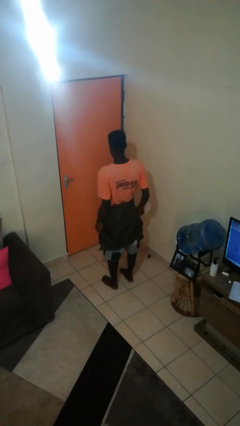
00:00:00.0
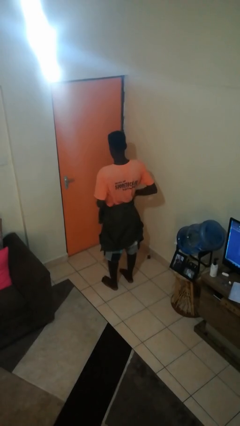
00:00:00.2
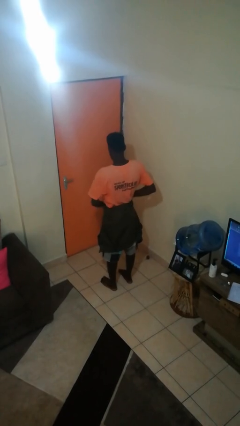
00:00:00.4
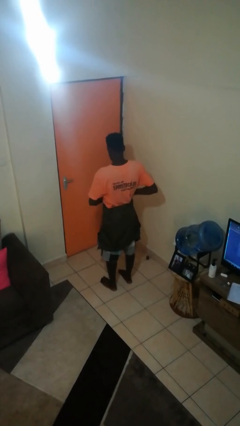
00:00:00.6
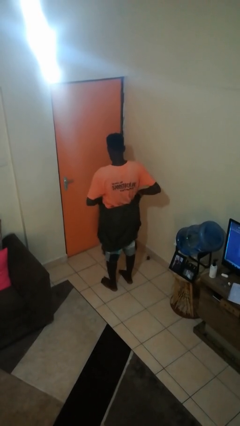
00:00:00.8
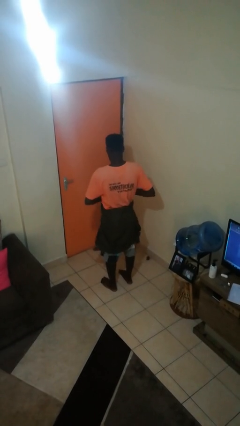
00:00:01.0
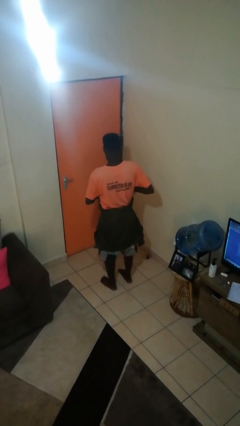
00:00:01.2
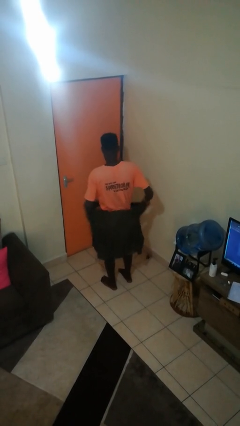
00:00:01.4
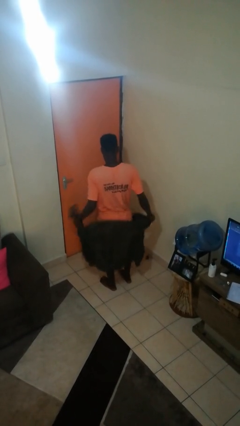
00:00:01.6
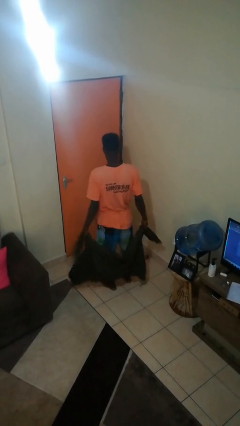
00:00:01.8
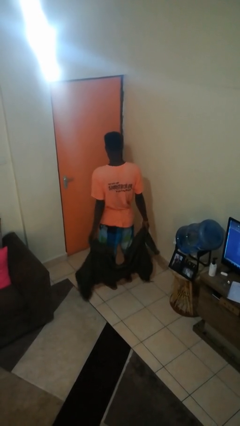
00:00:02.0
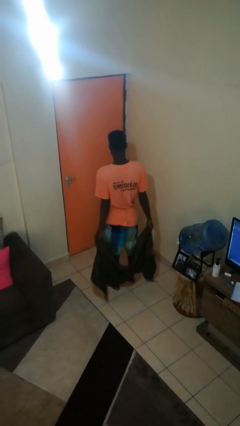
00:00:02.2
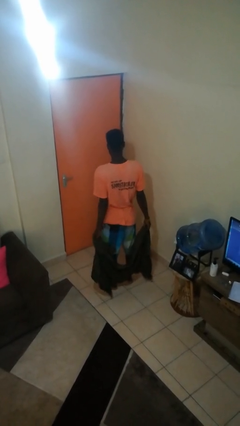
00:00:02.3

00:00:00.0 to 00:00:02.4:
person unties jacket around waist

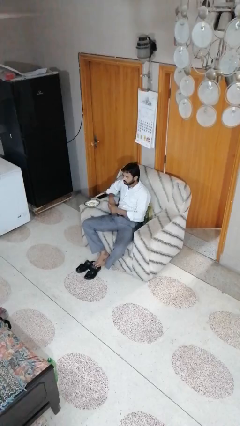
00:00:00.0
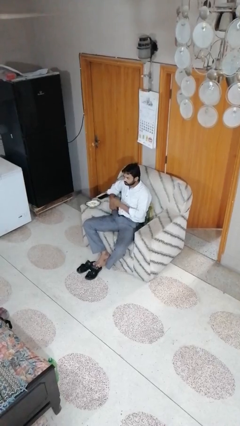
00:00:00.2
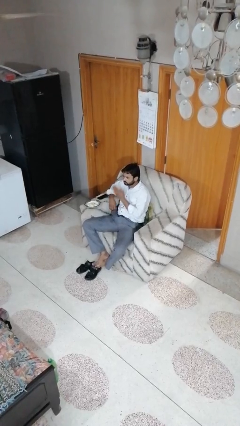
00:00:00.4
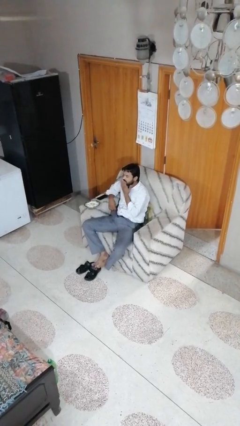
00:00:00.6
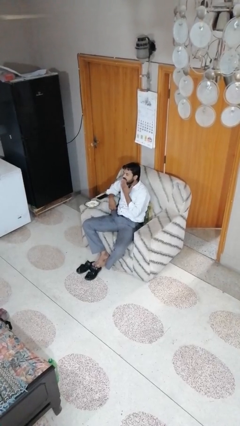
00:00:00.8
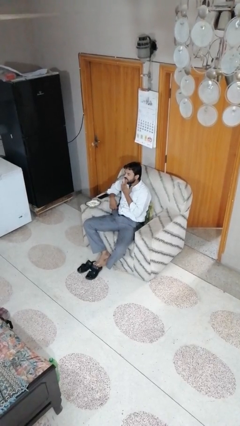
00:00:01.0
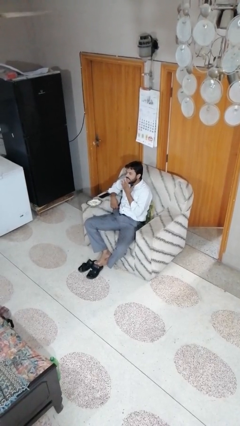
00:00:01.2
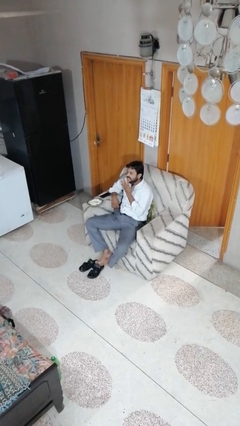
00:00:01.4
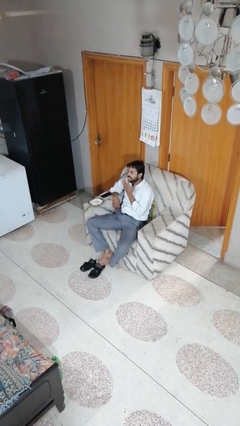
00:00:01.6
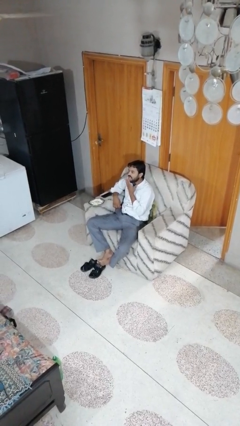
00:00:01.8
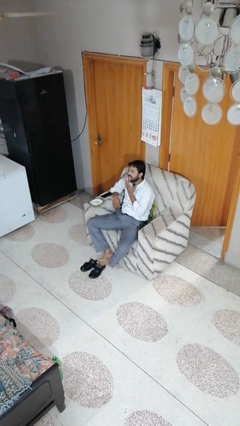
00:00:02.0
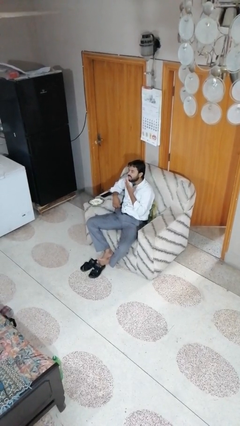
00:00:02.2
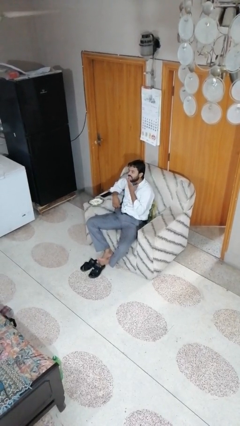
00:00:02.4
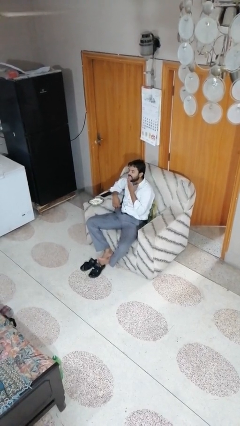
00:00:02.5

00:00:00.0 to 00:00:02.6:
person licks fingers

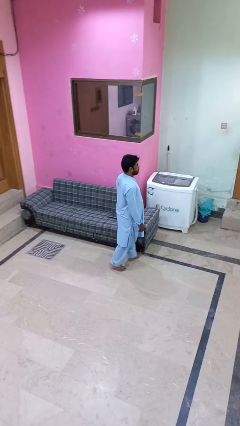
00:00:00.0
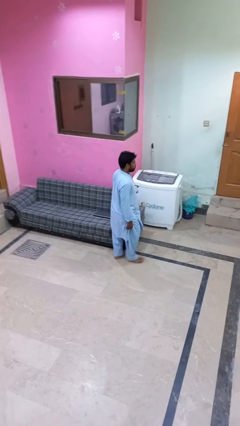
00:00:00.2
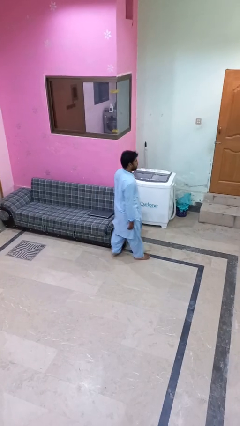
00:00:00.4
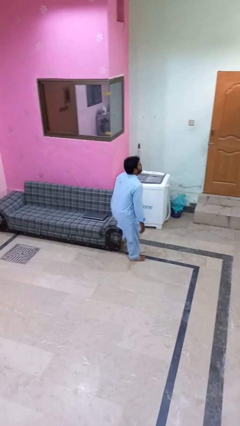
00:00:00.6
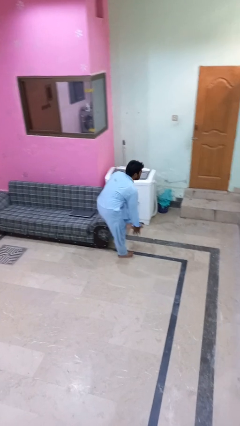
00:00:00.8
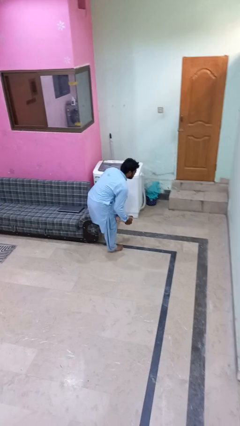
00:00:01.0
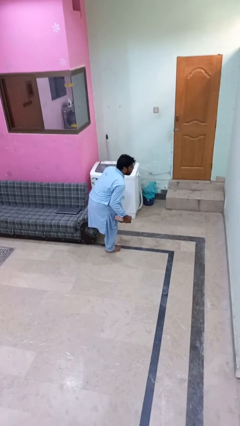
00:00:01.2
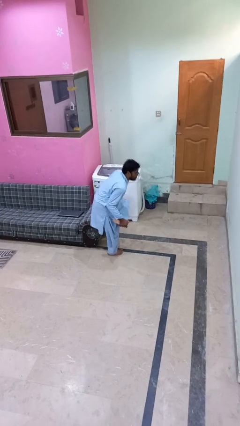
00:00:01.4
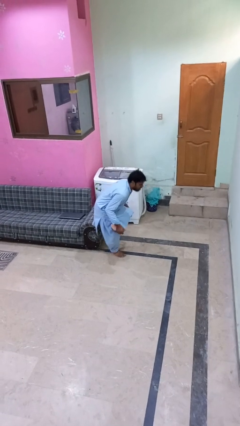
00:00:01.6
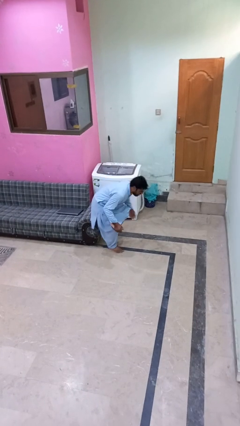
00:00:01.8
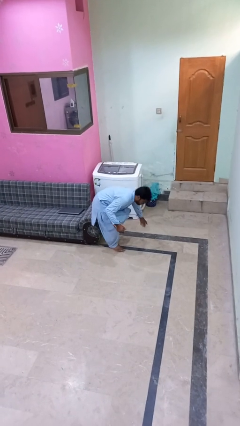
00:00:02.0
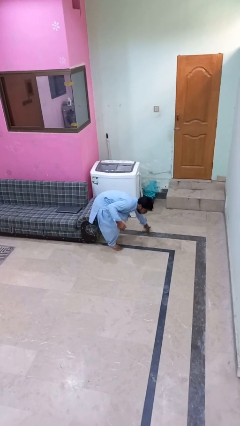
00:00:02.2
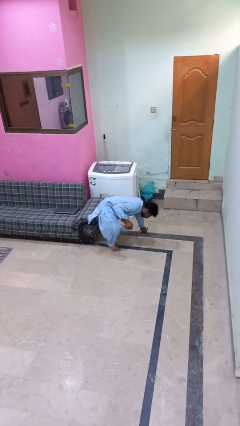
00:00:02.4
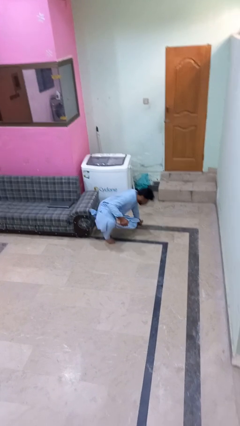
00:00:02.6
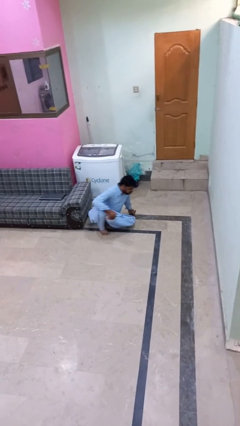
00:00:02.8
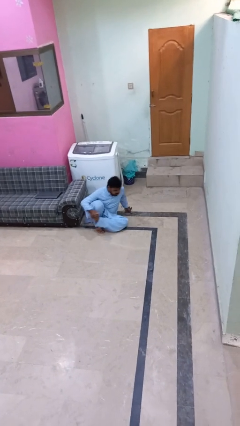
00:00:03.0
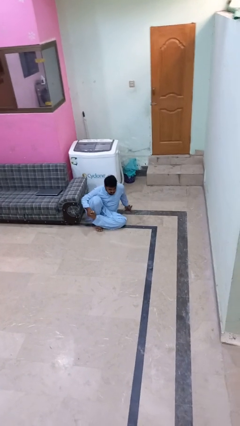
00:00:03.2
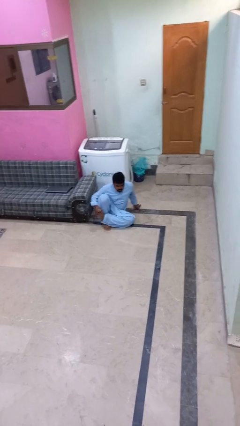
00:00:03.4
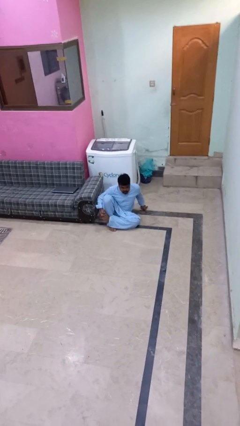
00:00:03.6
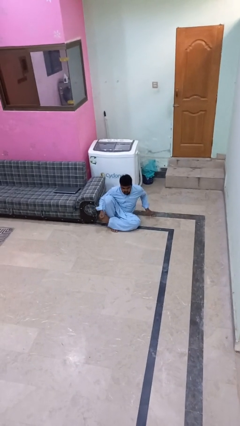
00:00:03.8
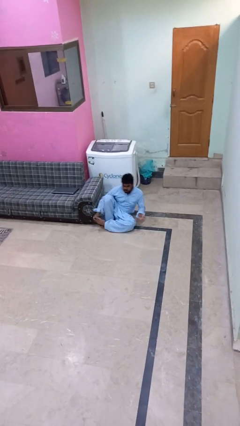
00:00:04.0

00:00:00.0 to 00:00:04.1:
person trips on object on floor

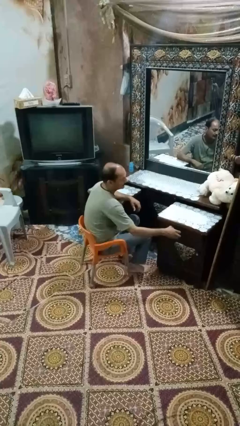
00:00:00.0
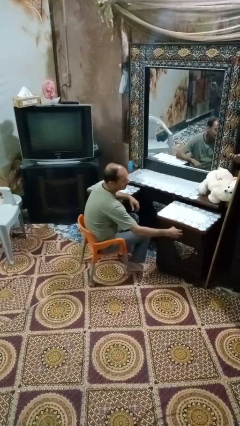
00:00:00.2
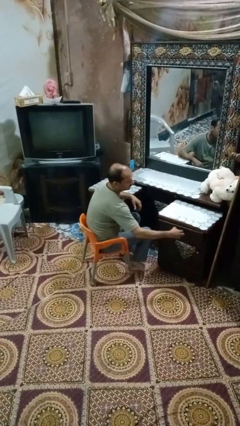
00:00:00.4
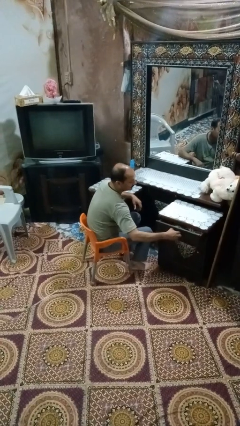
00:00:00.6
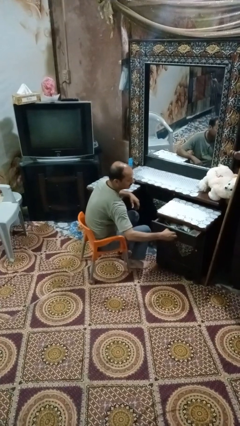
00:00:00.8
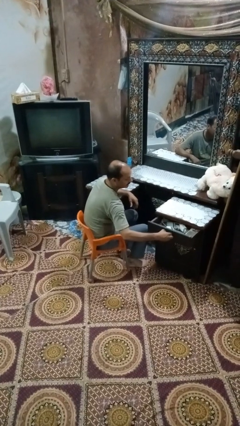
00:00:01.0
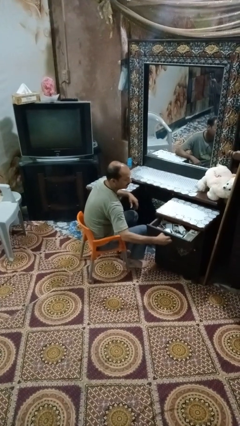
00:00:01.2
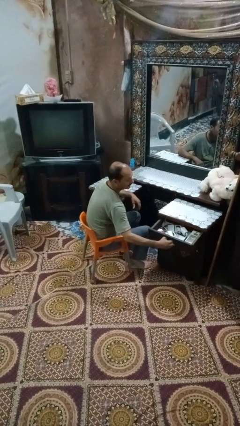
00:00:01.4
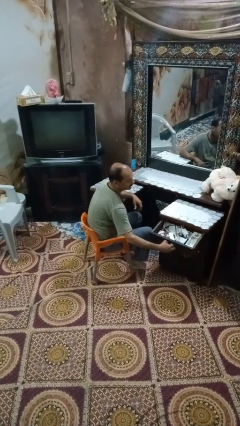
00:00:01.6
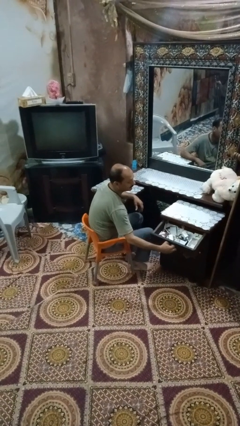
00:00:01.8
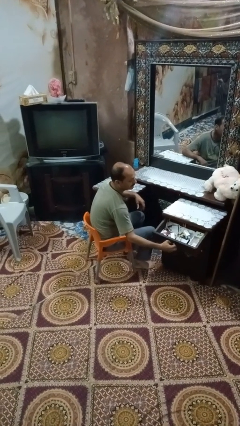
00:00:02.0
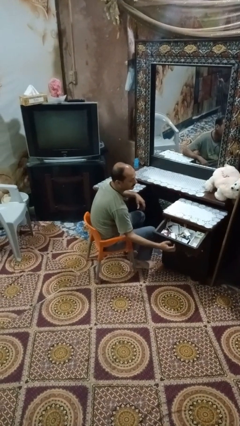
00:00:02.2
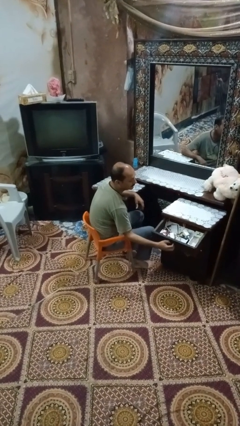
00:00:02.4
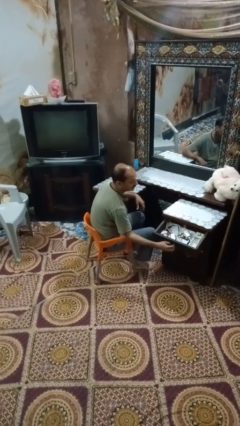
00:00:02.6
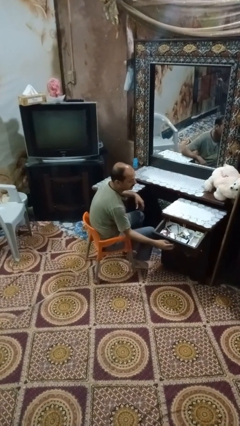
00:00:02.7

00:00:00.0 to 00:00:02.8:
person opens dresser drawer

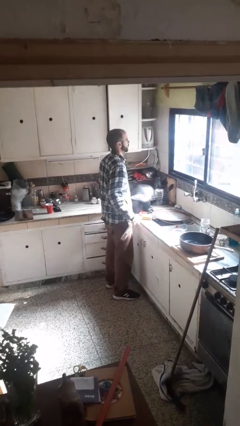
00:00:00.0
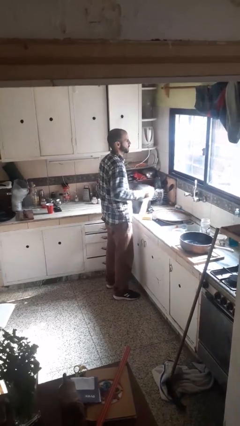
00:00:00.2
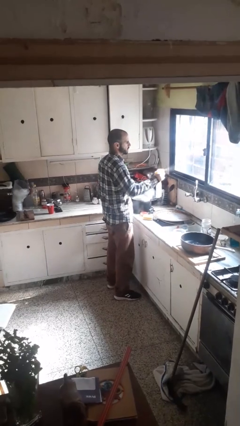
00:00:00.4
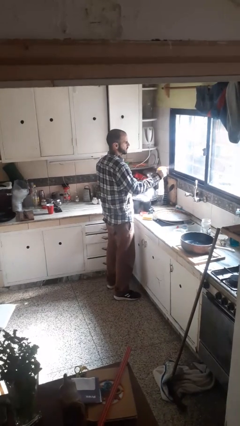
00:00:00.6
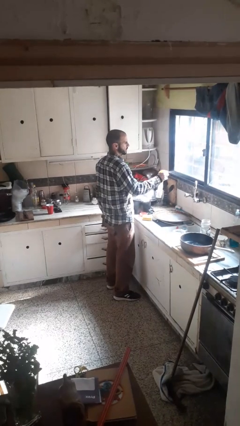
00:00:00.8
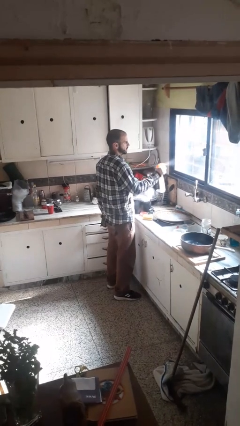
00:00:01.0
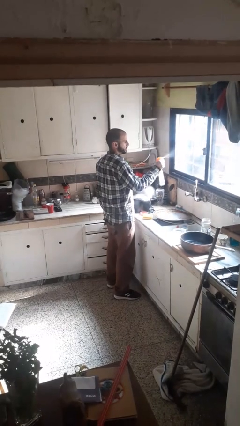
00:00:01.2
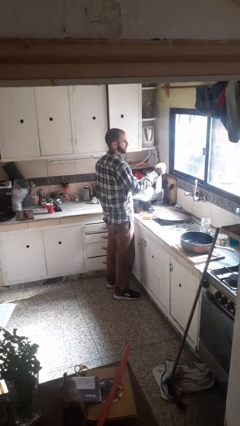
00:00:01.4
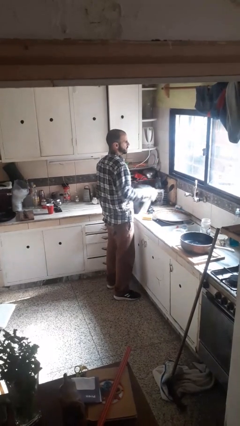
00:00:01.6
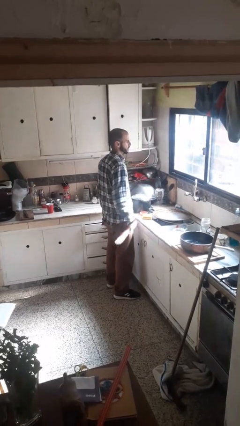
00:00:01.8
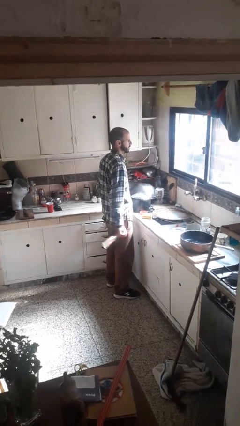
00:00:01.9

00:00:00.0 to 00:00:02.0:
person sprays from bottle

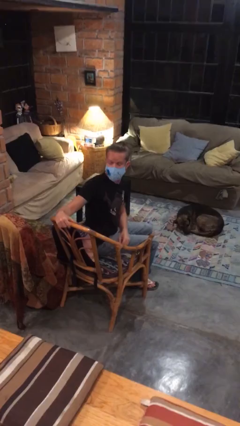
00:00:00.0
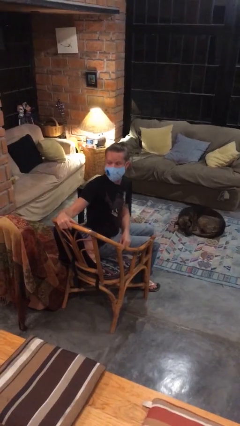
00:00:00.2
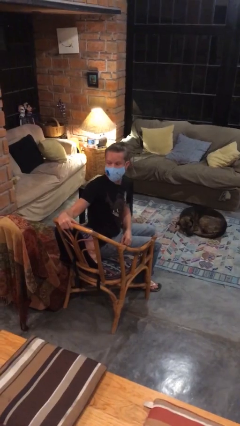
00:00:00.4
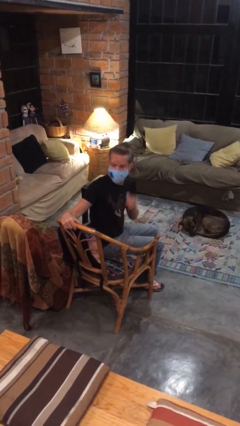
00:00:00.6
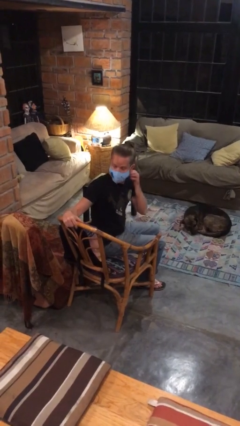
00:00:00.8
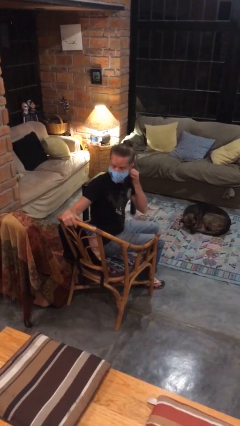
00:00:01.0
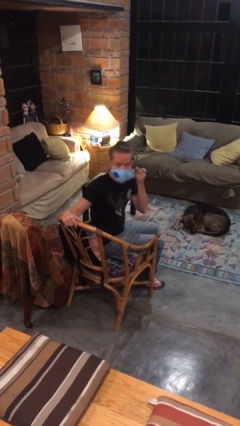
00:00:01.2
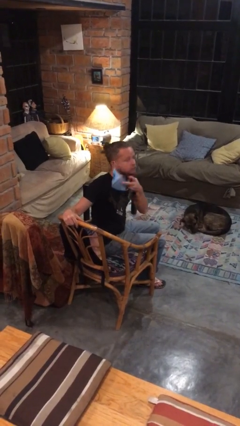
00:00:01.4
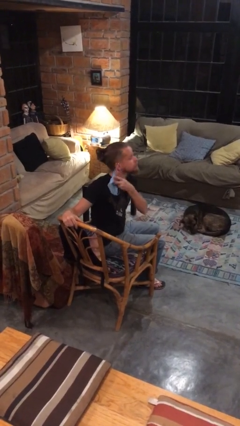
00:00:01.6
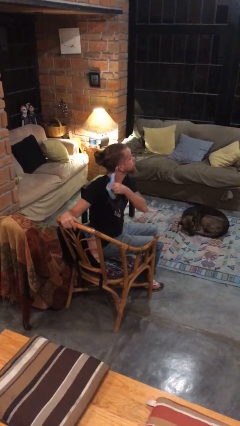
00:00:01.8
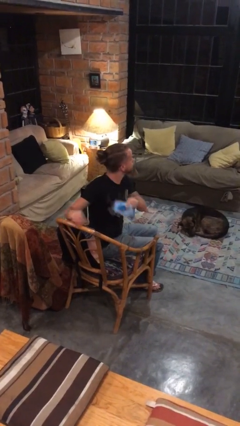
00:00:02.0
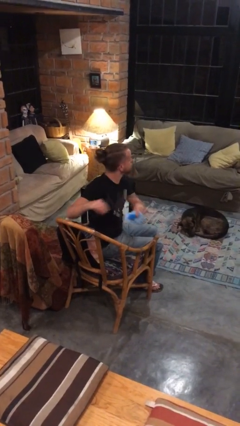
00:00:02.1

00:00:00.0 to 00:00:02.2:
person takes off facemask

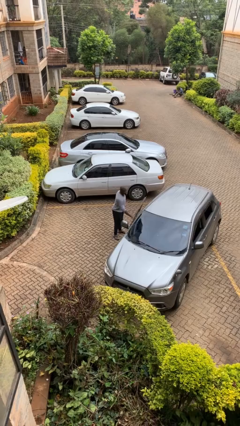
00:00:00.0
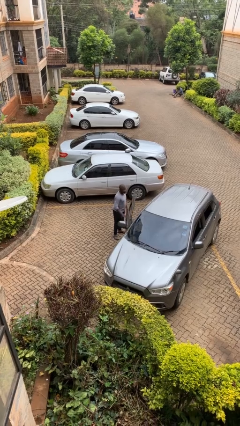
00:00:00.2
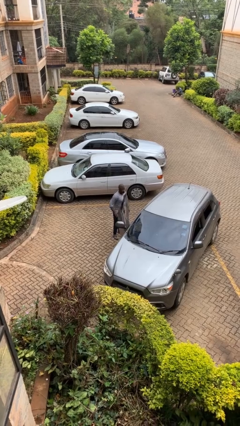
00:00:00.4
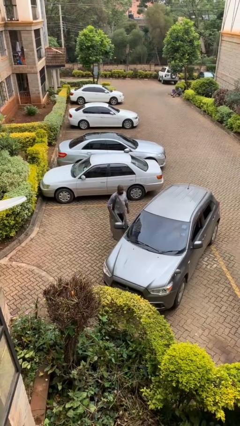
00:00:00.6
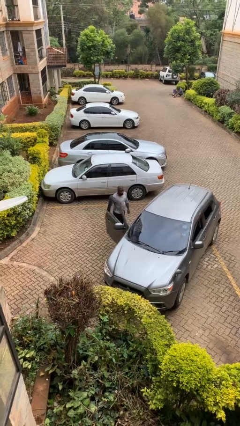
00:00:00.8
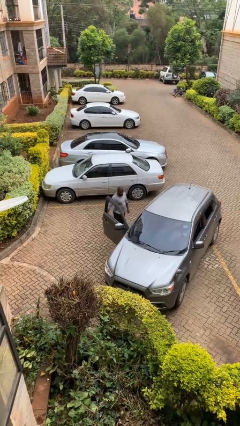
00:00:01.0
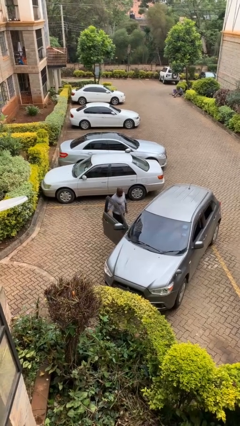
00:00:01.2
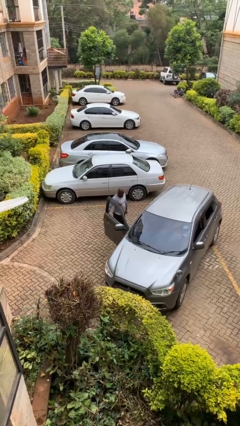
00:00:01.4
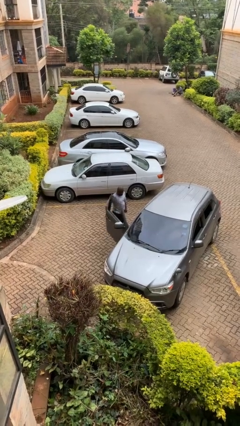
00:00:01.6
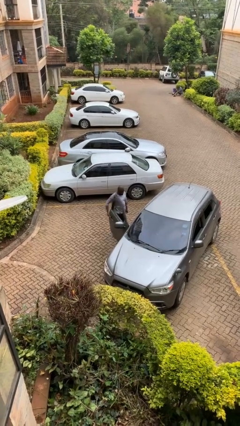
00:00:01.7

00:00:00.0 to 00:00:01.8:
person opens car door
